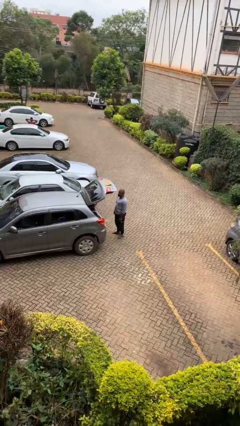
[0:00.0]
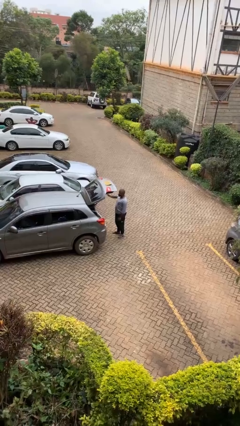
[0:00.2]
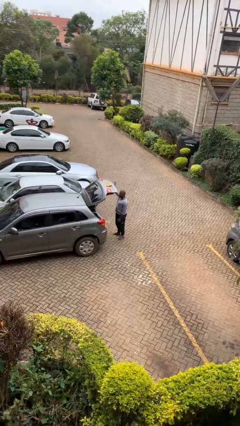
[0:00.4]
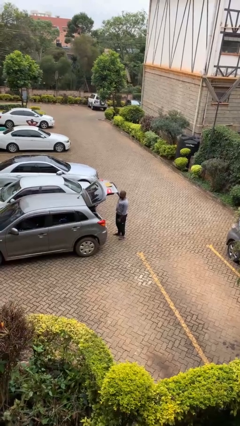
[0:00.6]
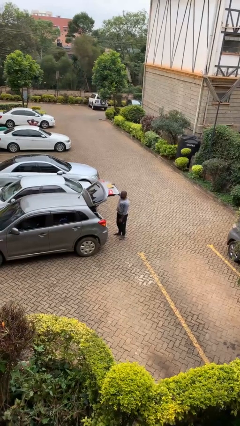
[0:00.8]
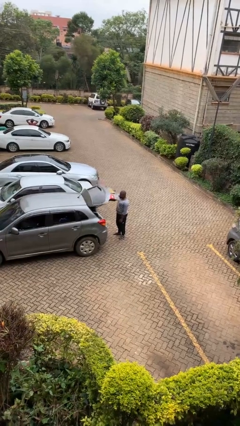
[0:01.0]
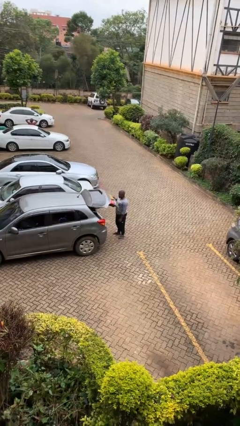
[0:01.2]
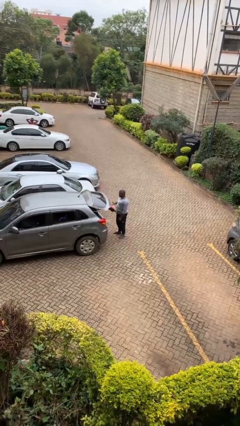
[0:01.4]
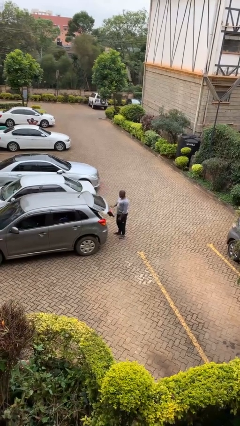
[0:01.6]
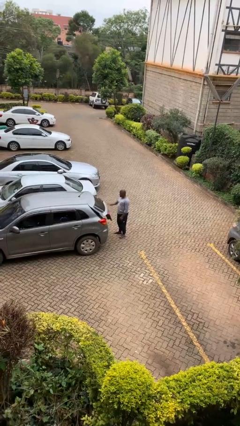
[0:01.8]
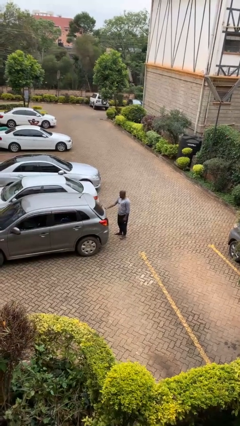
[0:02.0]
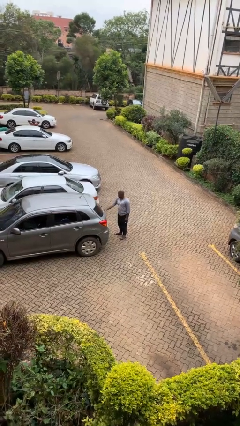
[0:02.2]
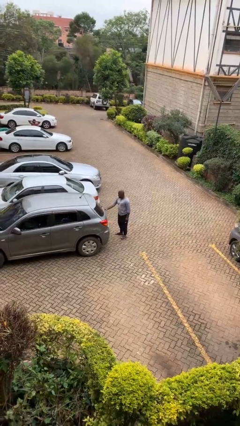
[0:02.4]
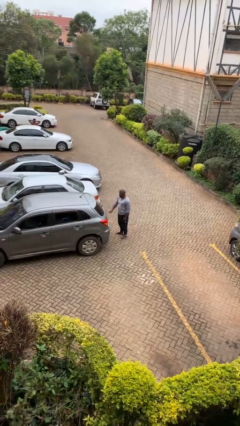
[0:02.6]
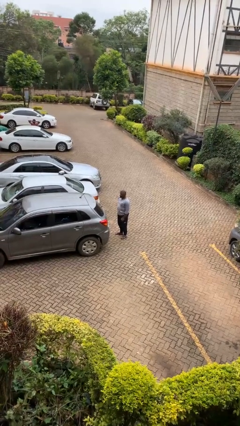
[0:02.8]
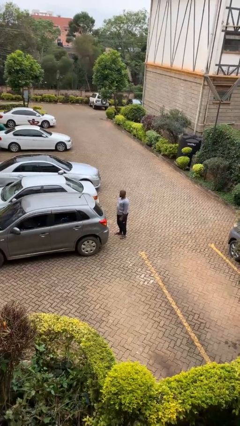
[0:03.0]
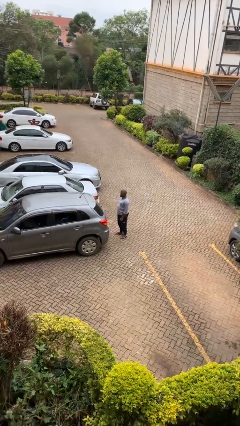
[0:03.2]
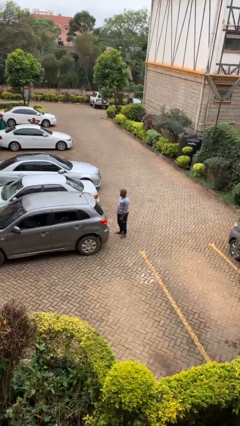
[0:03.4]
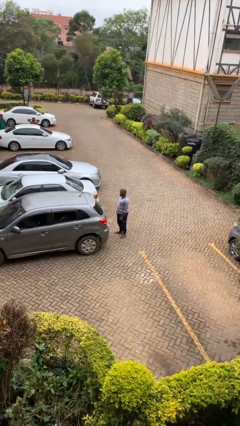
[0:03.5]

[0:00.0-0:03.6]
person closes car trunk

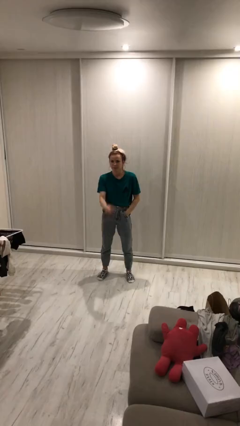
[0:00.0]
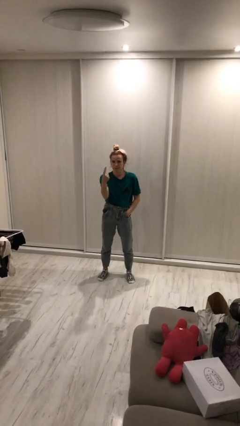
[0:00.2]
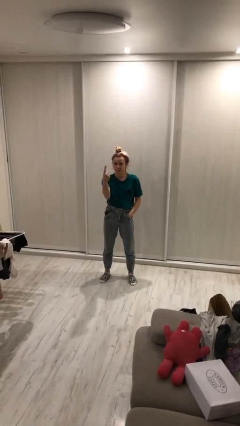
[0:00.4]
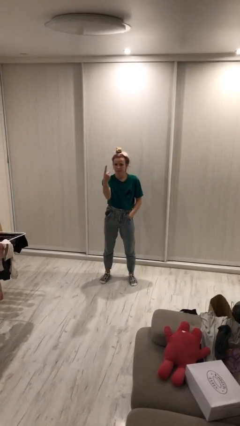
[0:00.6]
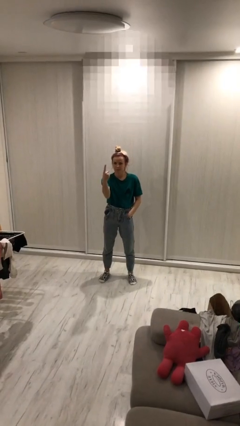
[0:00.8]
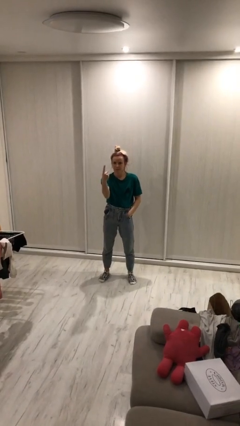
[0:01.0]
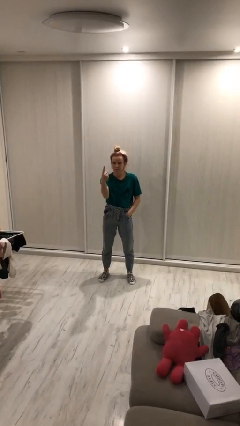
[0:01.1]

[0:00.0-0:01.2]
person gestures number one

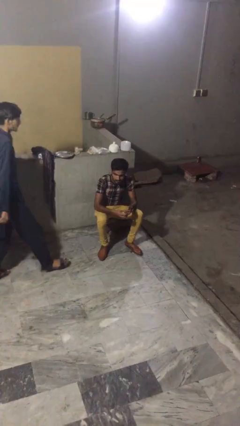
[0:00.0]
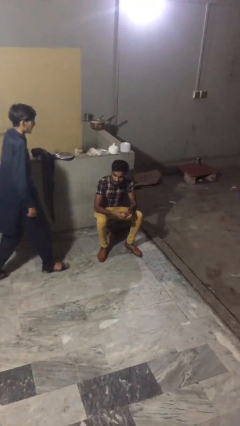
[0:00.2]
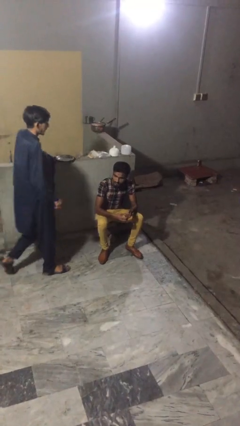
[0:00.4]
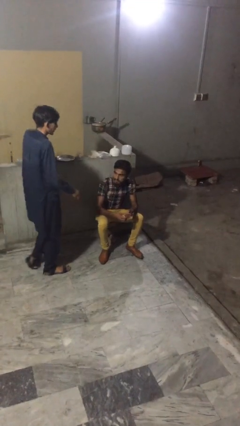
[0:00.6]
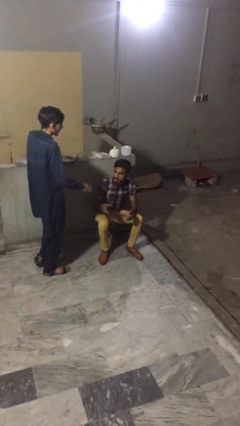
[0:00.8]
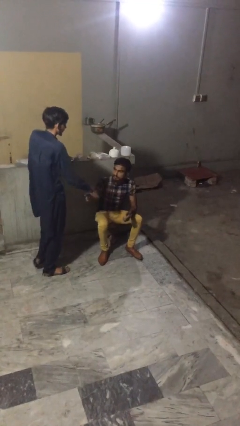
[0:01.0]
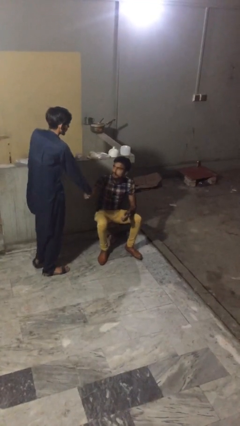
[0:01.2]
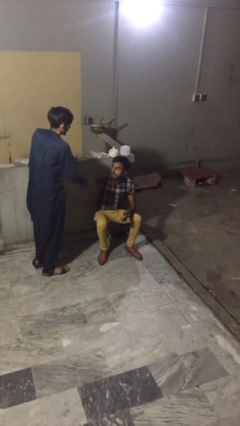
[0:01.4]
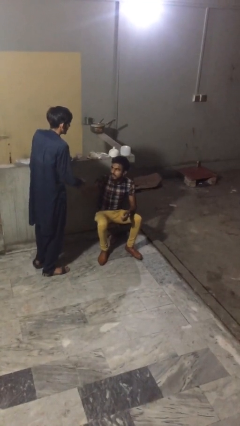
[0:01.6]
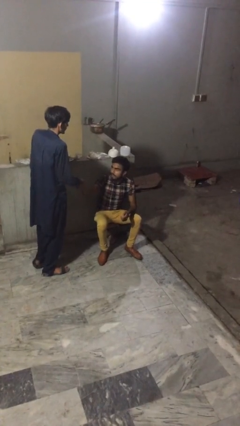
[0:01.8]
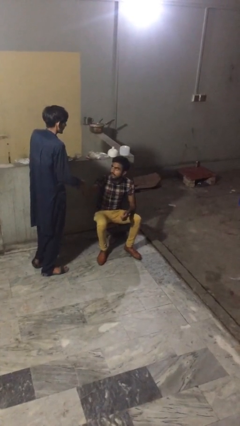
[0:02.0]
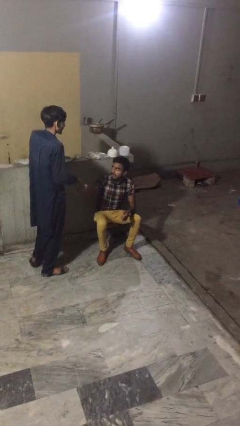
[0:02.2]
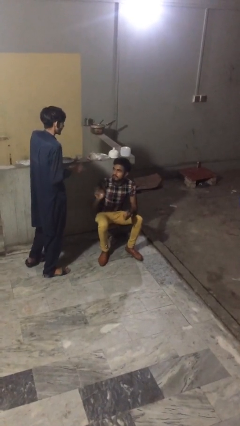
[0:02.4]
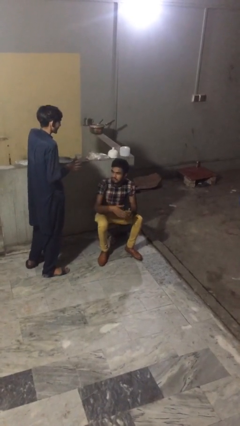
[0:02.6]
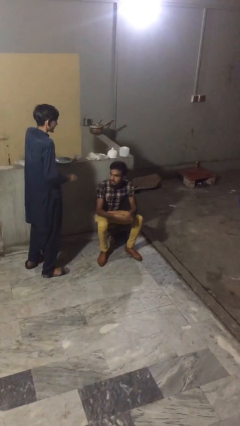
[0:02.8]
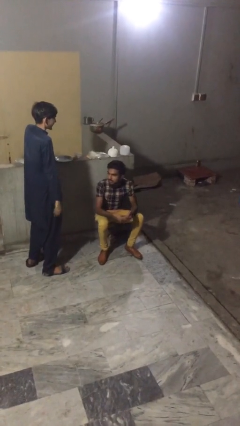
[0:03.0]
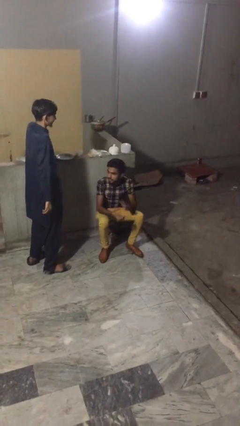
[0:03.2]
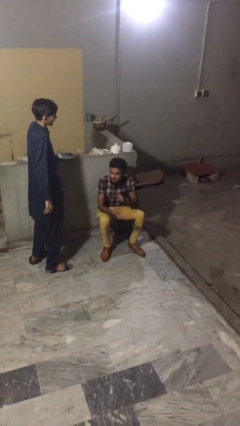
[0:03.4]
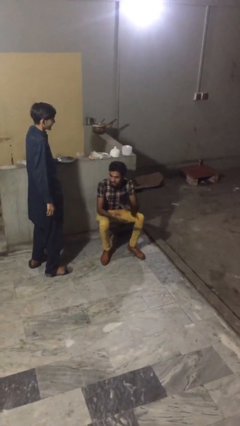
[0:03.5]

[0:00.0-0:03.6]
person shakes hand

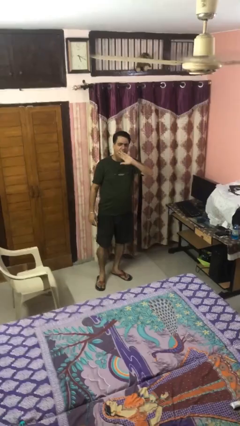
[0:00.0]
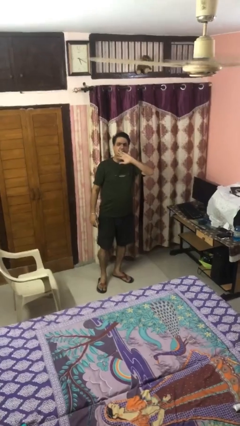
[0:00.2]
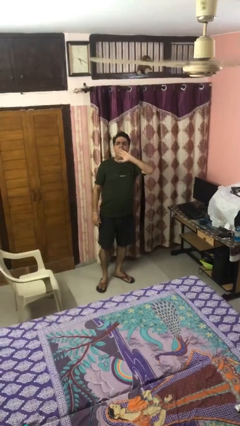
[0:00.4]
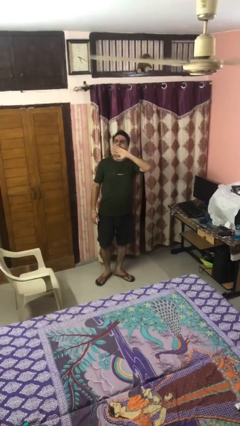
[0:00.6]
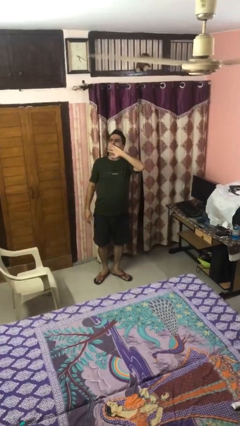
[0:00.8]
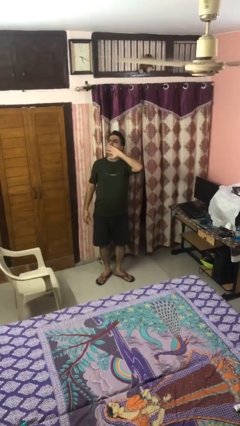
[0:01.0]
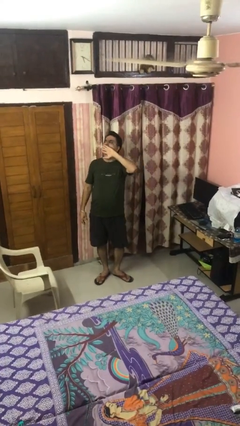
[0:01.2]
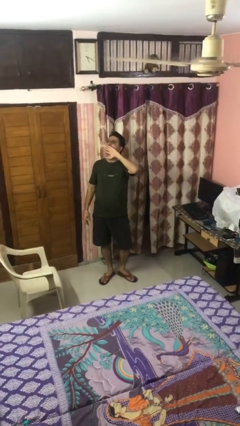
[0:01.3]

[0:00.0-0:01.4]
person yawns

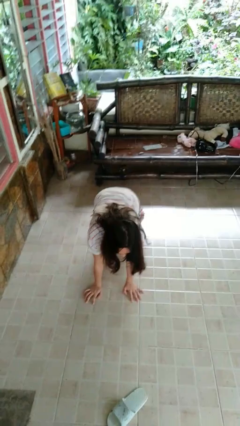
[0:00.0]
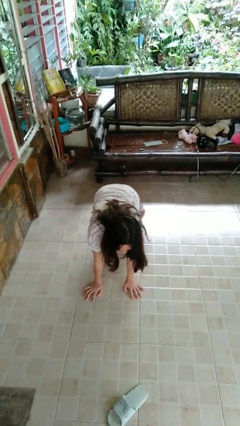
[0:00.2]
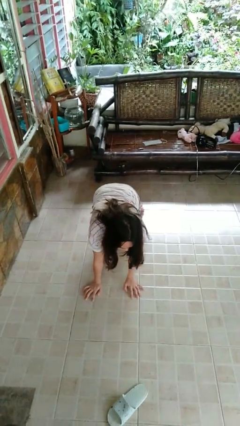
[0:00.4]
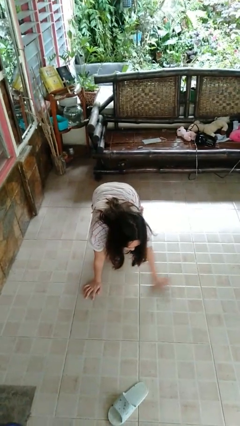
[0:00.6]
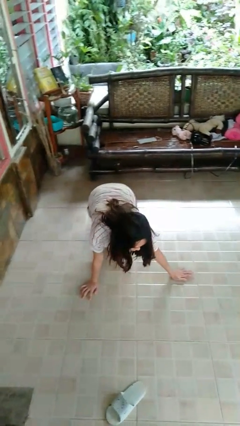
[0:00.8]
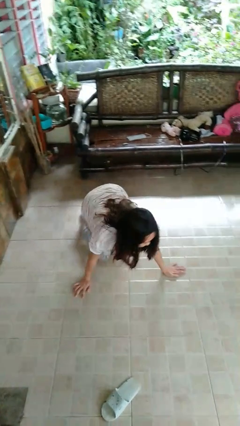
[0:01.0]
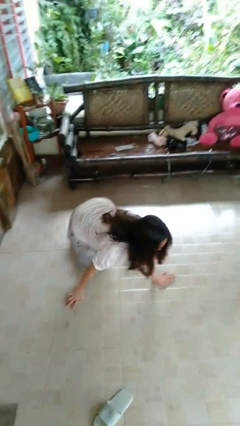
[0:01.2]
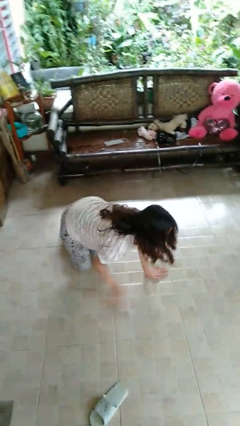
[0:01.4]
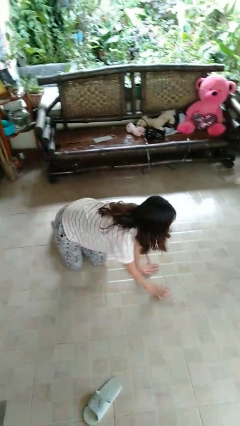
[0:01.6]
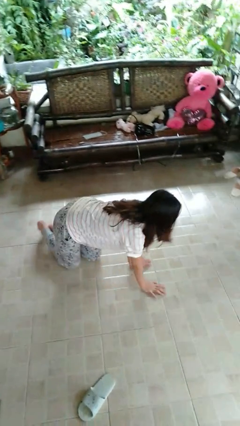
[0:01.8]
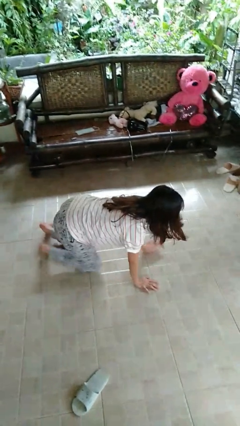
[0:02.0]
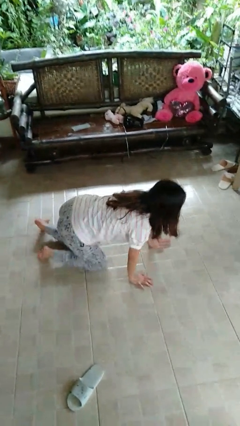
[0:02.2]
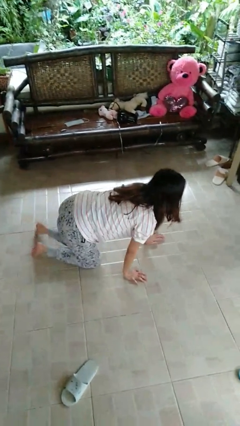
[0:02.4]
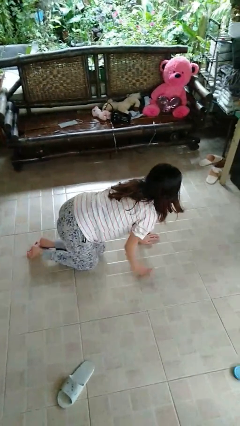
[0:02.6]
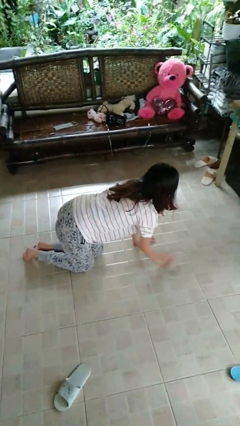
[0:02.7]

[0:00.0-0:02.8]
person crawls

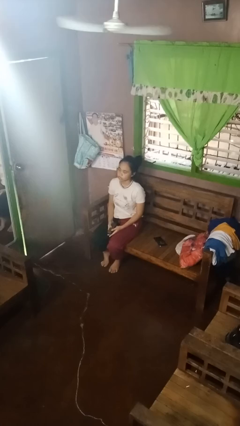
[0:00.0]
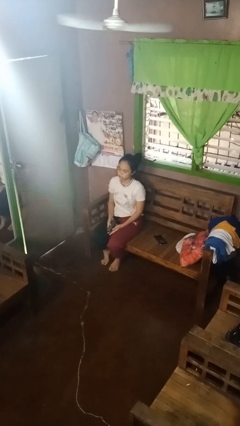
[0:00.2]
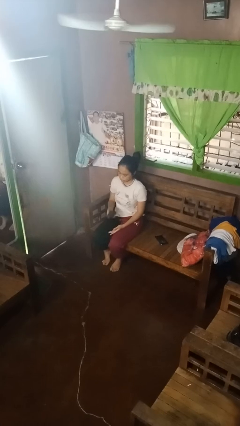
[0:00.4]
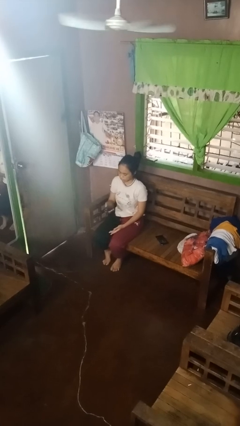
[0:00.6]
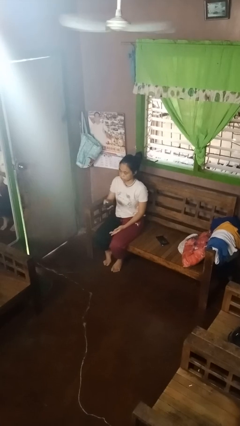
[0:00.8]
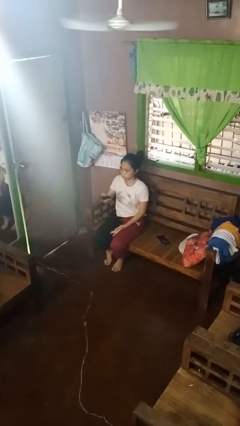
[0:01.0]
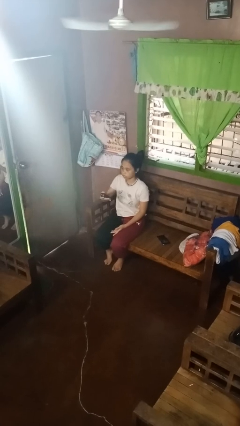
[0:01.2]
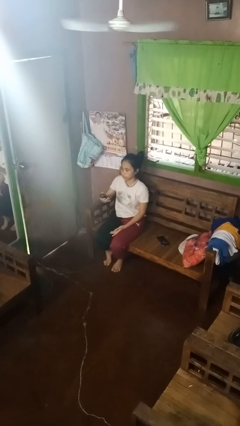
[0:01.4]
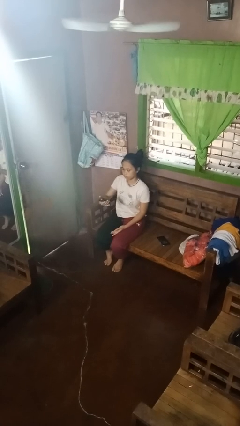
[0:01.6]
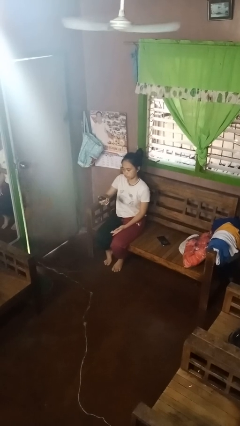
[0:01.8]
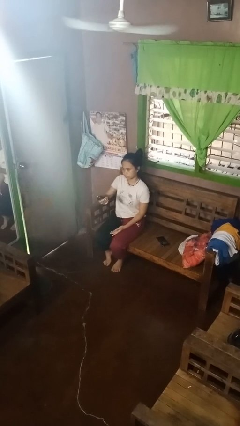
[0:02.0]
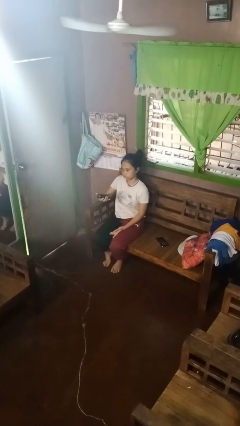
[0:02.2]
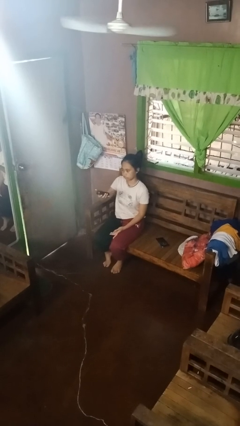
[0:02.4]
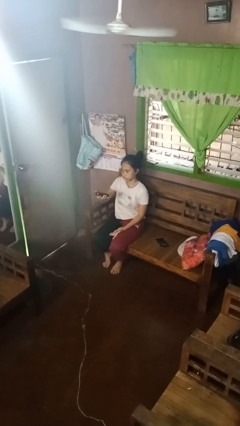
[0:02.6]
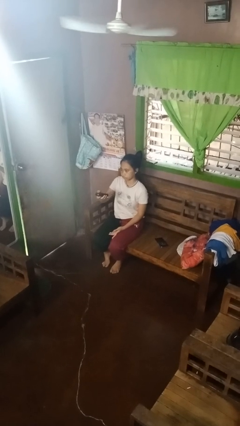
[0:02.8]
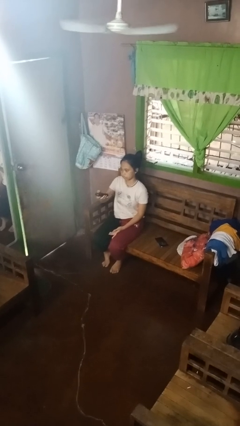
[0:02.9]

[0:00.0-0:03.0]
person uses television remote

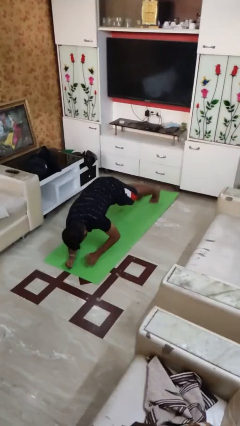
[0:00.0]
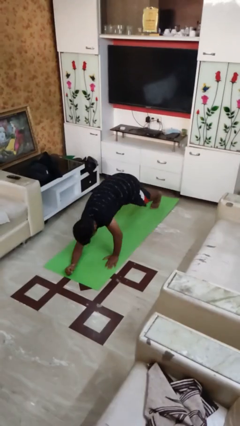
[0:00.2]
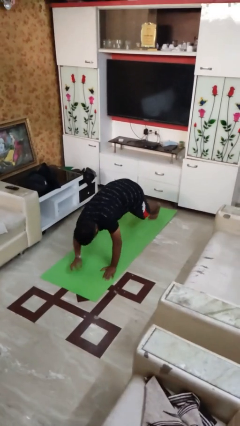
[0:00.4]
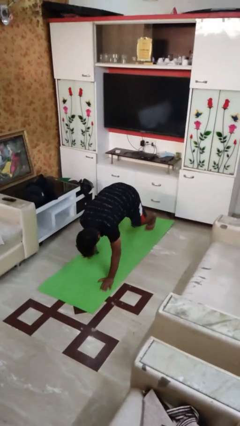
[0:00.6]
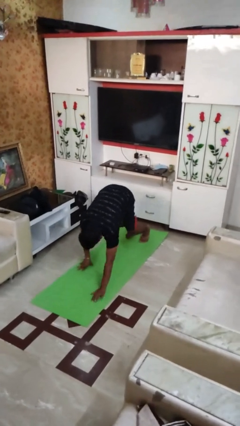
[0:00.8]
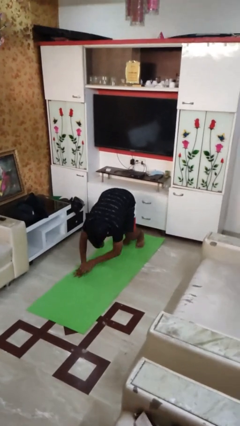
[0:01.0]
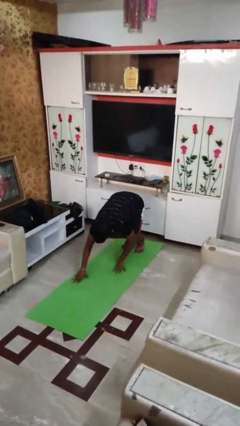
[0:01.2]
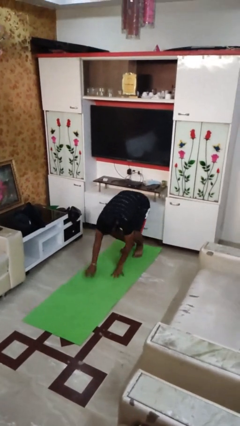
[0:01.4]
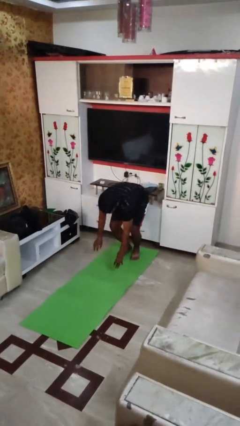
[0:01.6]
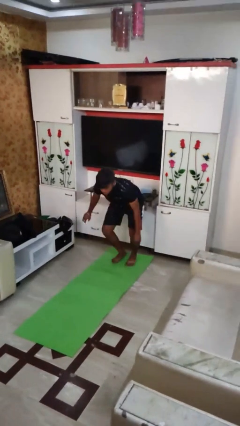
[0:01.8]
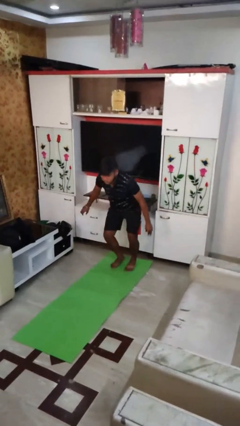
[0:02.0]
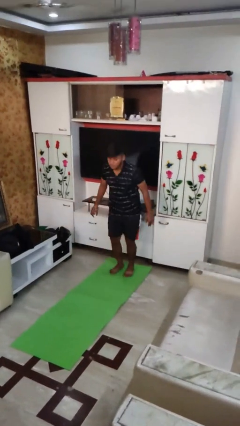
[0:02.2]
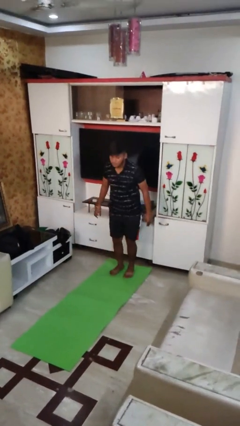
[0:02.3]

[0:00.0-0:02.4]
person stands up from floor
